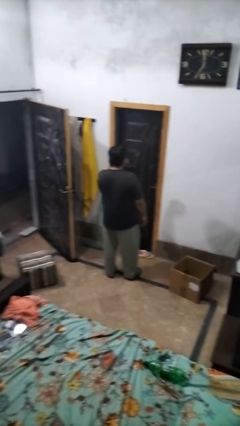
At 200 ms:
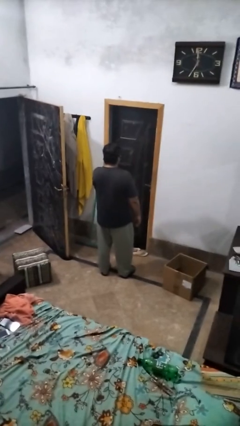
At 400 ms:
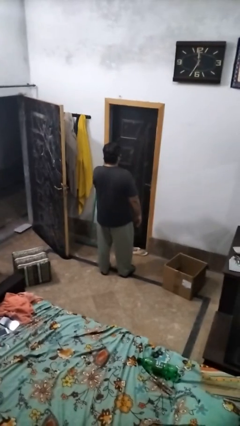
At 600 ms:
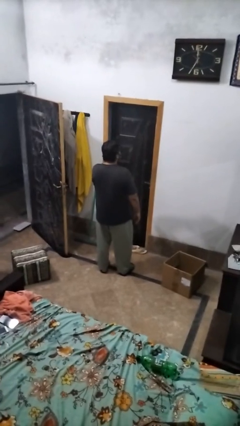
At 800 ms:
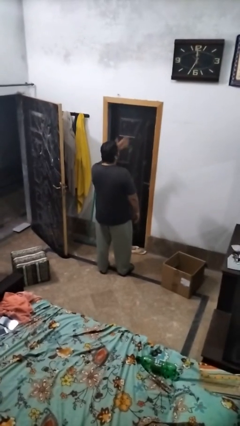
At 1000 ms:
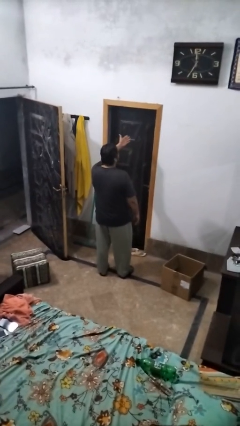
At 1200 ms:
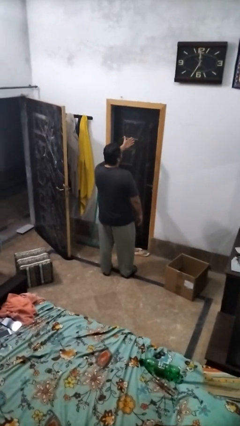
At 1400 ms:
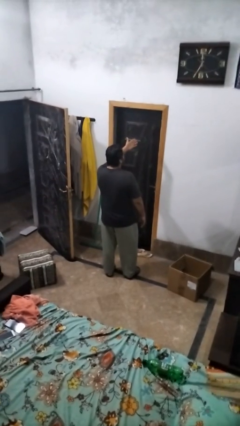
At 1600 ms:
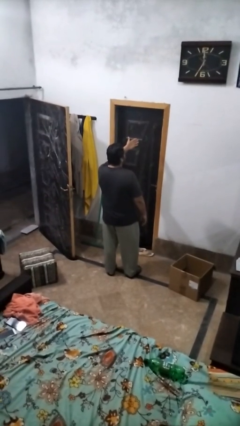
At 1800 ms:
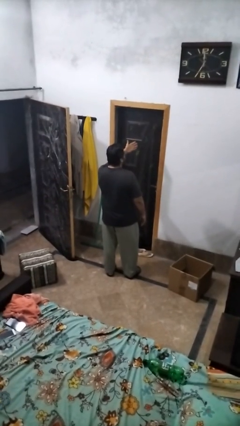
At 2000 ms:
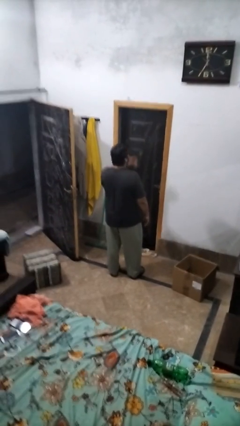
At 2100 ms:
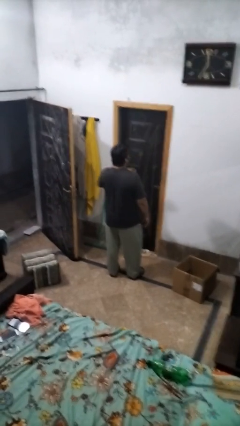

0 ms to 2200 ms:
person gestures blow kiss

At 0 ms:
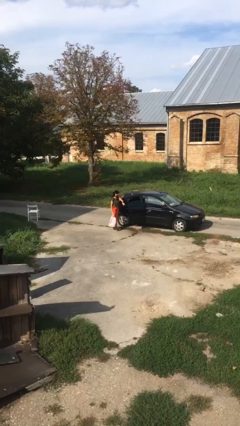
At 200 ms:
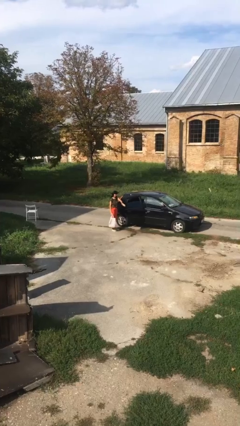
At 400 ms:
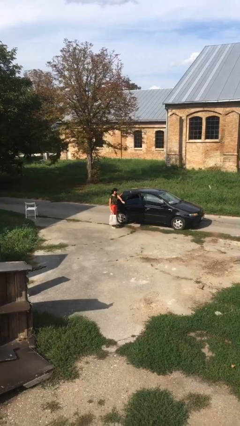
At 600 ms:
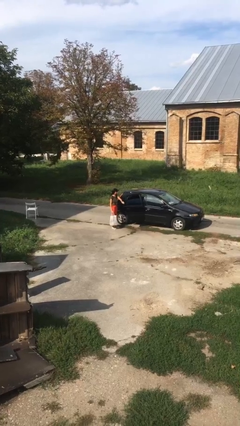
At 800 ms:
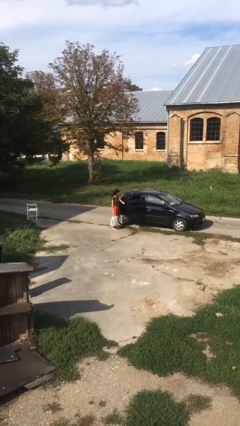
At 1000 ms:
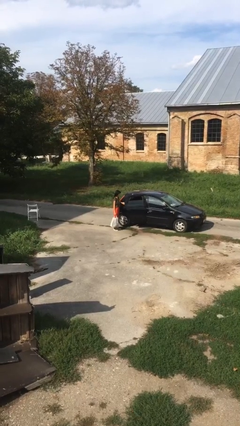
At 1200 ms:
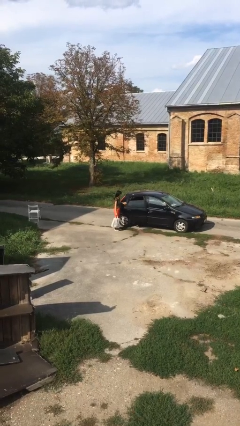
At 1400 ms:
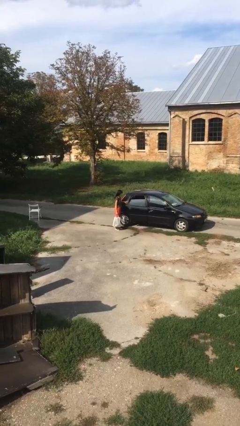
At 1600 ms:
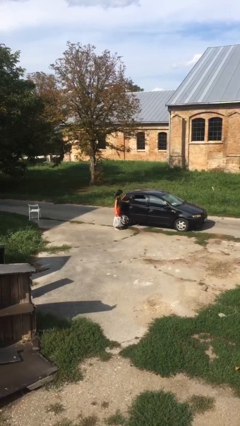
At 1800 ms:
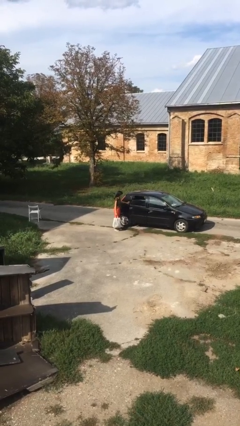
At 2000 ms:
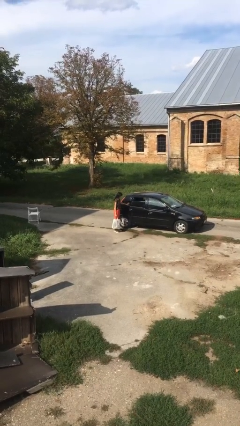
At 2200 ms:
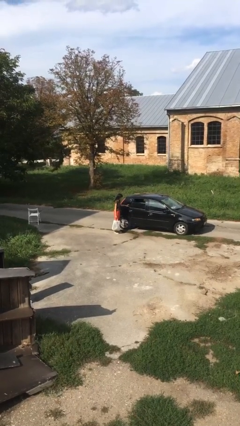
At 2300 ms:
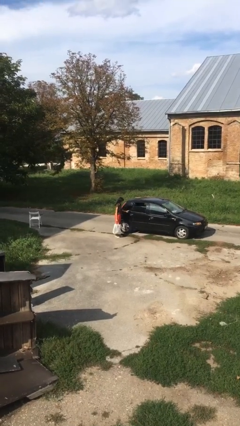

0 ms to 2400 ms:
person closes car door

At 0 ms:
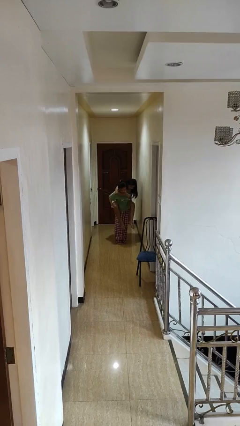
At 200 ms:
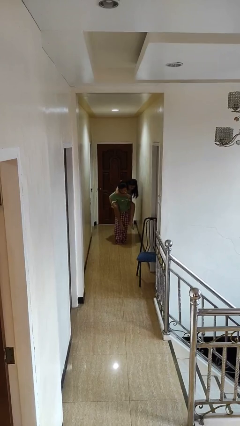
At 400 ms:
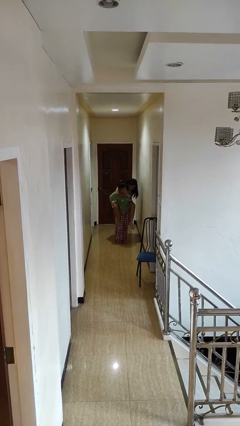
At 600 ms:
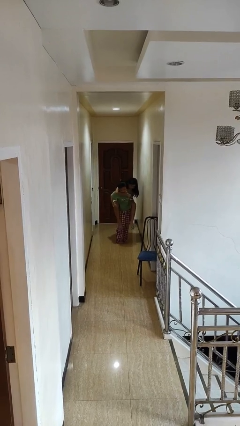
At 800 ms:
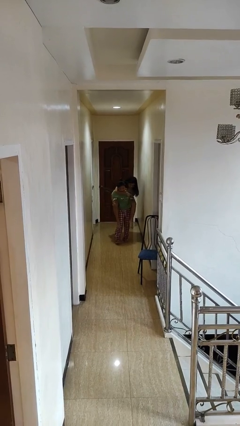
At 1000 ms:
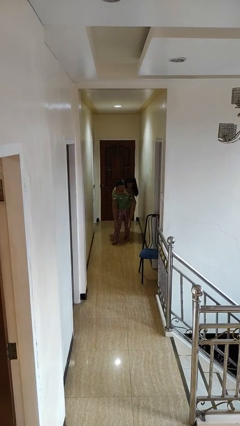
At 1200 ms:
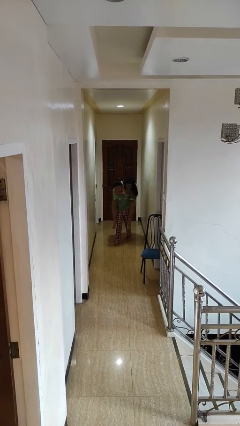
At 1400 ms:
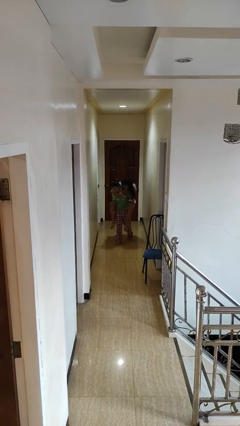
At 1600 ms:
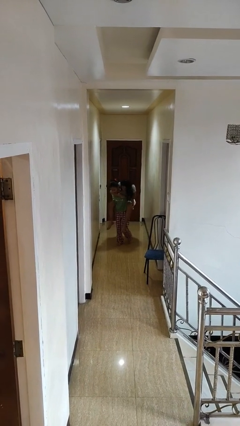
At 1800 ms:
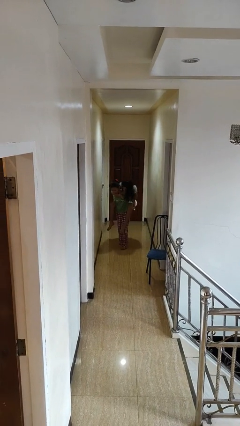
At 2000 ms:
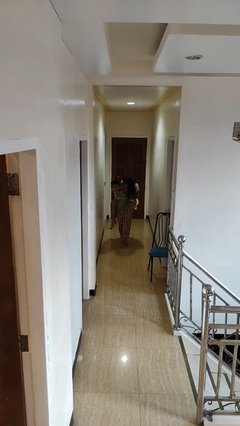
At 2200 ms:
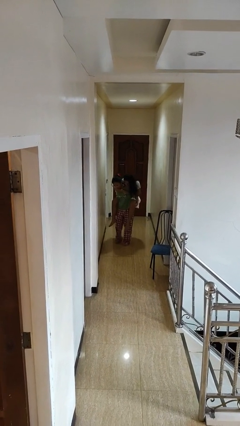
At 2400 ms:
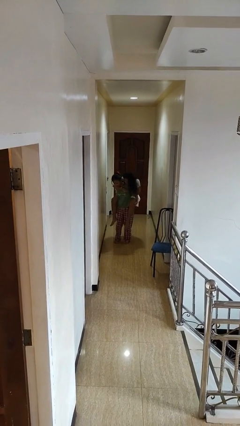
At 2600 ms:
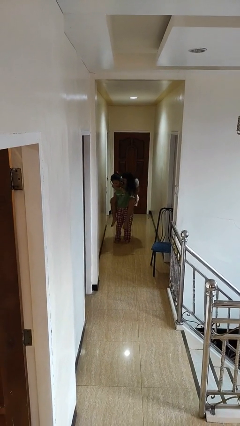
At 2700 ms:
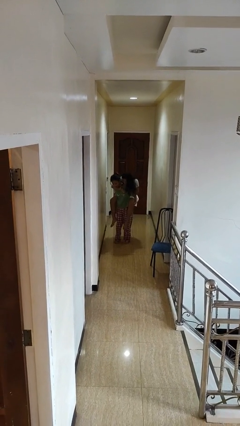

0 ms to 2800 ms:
person carries person on back

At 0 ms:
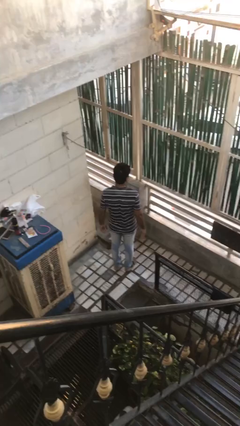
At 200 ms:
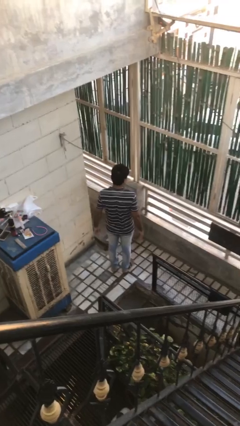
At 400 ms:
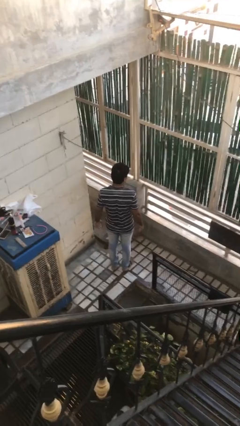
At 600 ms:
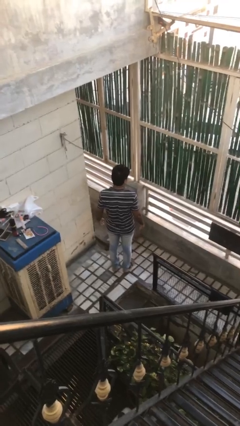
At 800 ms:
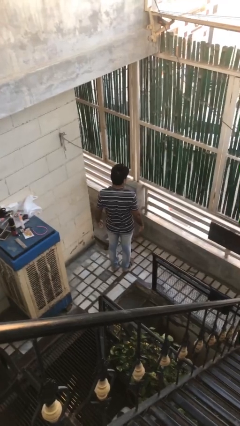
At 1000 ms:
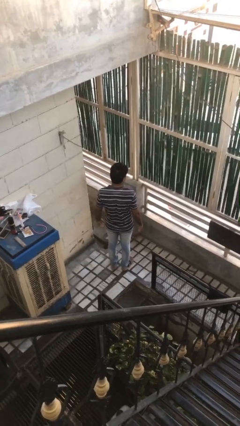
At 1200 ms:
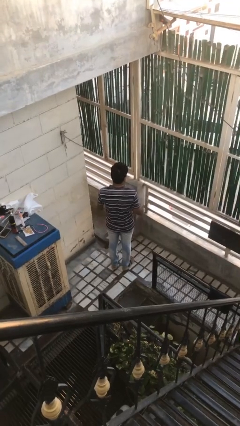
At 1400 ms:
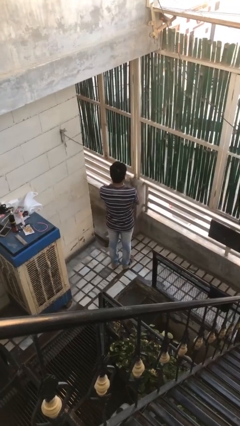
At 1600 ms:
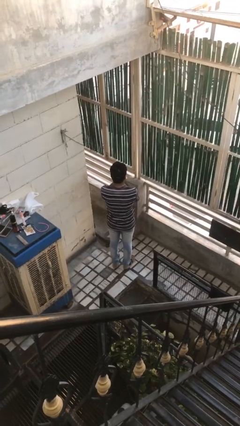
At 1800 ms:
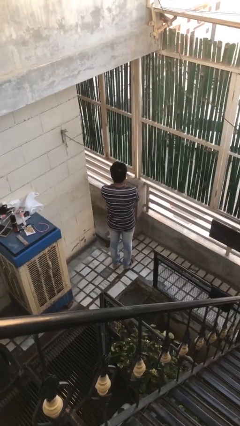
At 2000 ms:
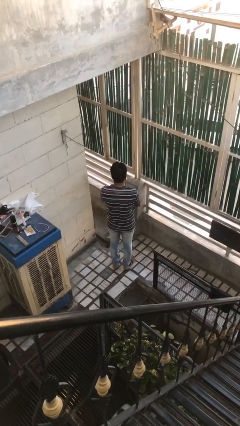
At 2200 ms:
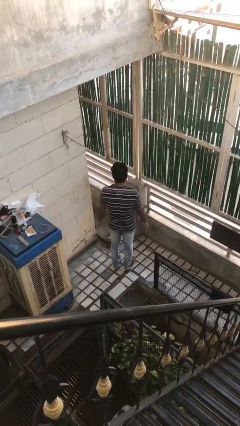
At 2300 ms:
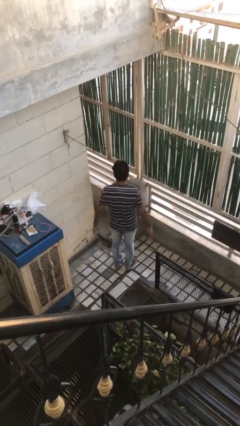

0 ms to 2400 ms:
person claps hands

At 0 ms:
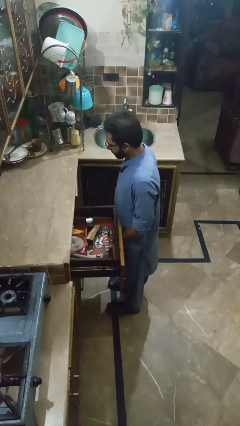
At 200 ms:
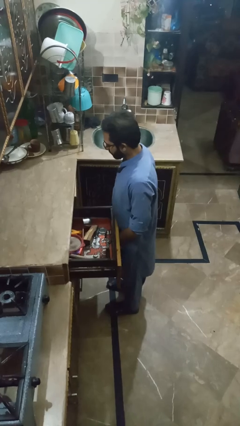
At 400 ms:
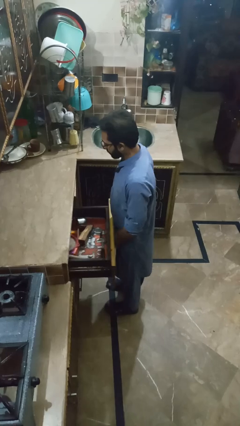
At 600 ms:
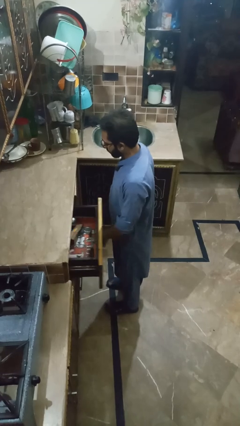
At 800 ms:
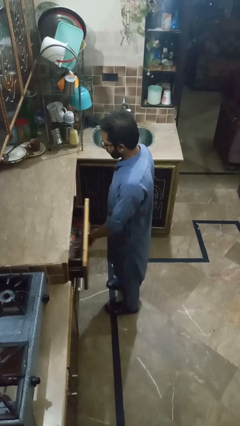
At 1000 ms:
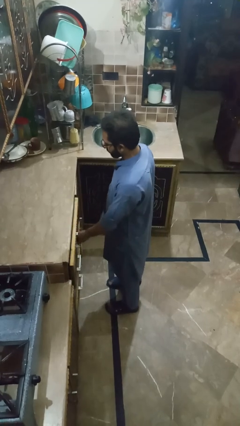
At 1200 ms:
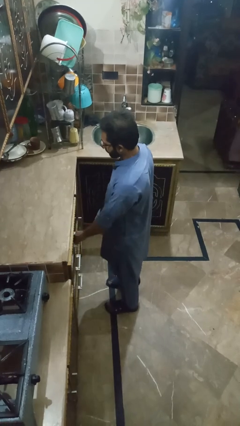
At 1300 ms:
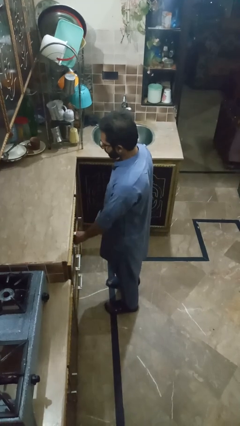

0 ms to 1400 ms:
person closes kitchen drawer

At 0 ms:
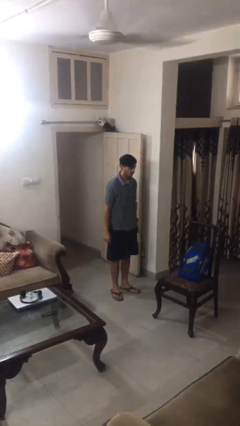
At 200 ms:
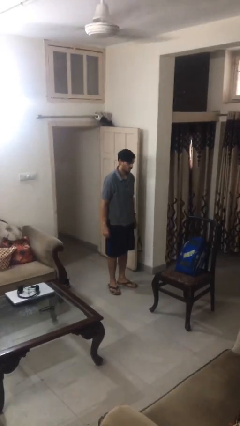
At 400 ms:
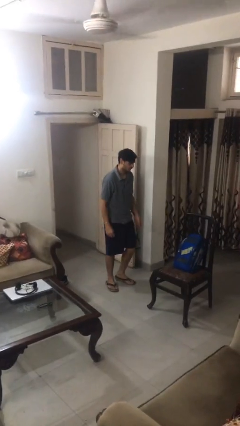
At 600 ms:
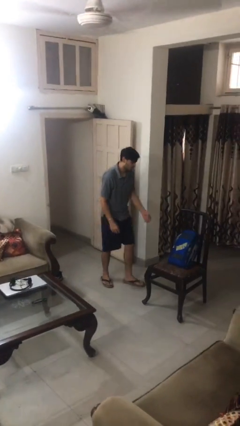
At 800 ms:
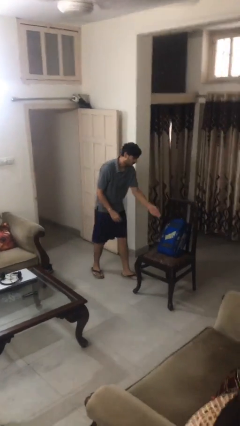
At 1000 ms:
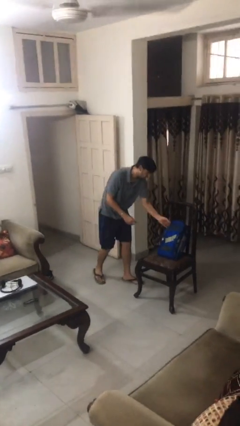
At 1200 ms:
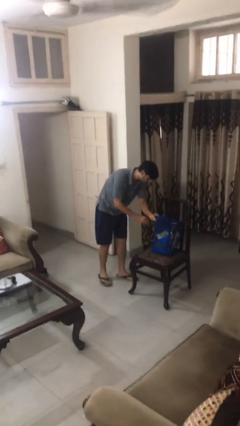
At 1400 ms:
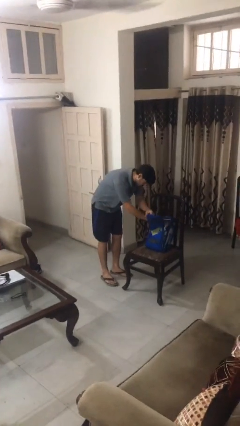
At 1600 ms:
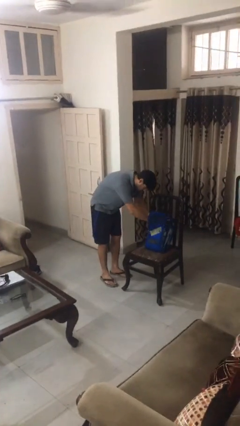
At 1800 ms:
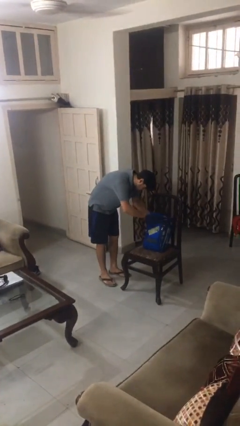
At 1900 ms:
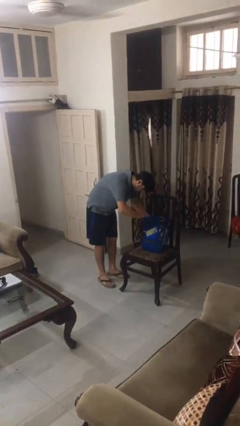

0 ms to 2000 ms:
person searches in backpack

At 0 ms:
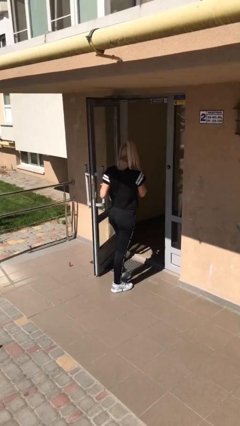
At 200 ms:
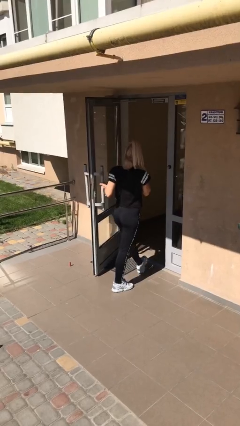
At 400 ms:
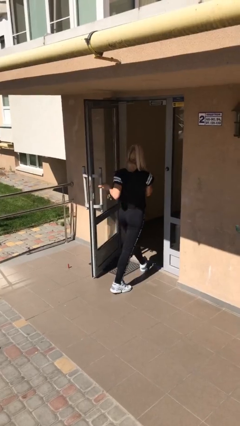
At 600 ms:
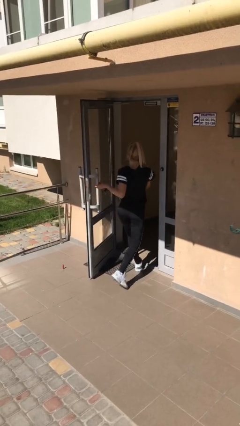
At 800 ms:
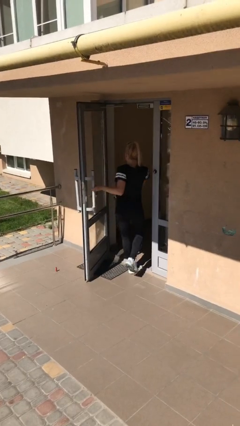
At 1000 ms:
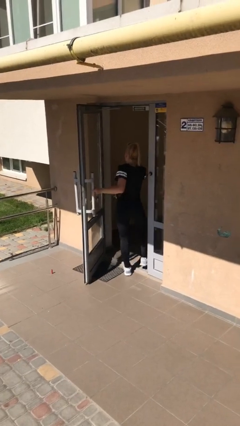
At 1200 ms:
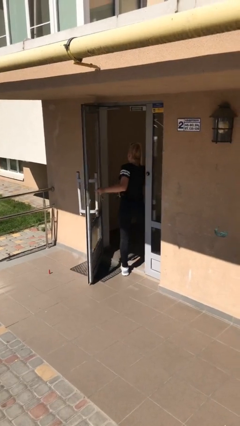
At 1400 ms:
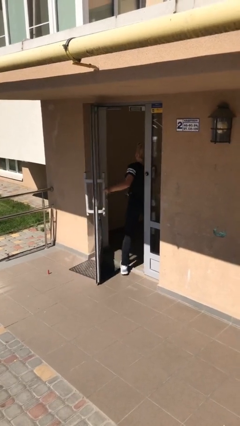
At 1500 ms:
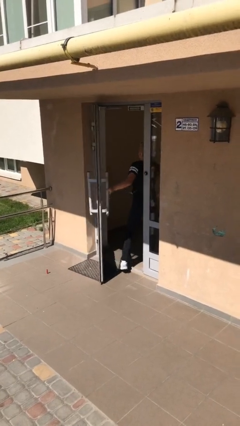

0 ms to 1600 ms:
person exits scene through structure

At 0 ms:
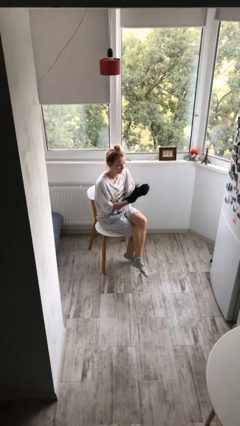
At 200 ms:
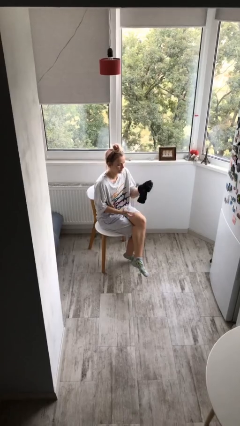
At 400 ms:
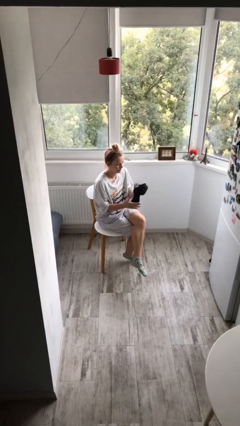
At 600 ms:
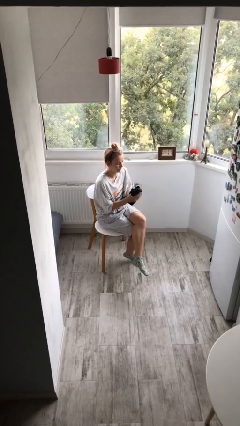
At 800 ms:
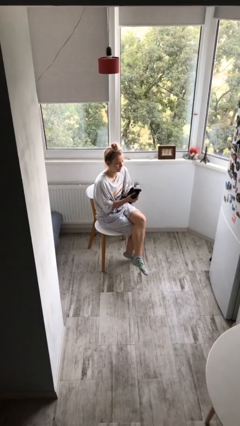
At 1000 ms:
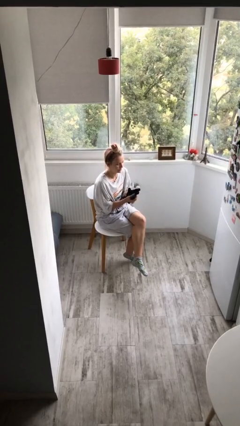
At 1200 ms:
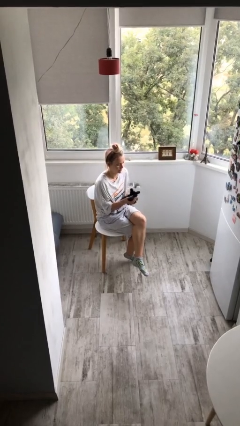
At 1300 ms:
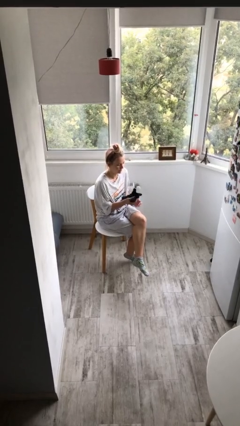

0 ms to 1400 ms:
person takes off gloves

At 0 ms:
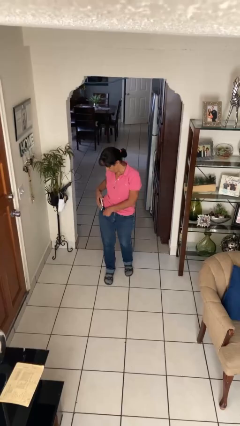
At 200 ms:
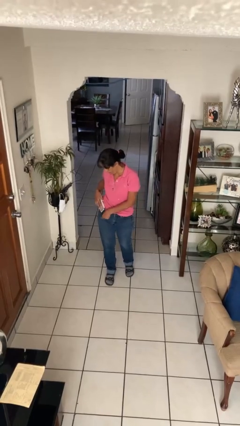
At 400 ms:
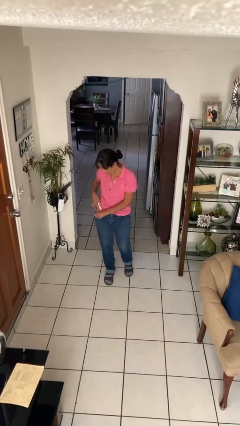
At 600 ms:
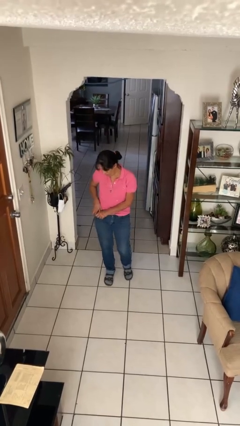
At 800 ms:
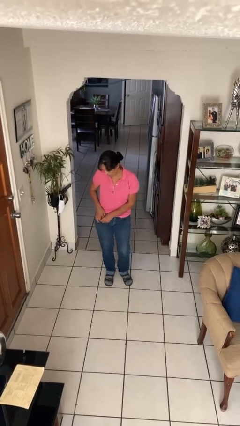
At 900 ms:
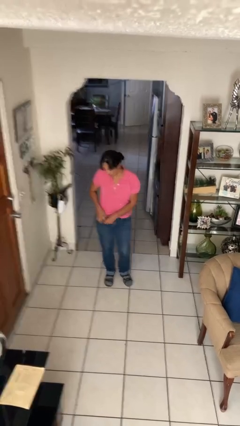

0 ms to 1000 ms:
person puts phone into pocket
